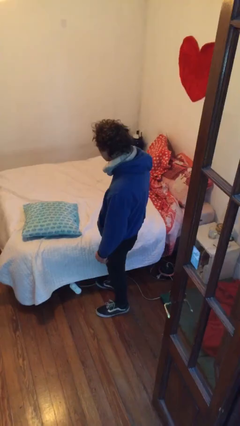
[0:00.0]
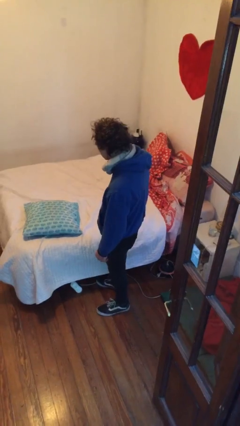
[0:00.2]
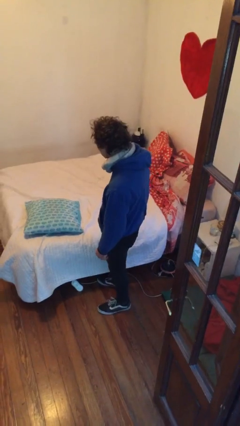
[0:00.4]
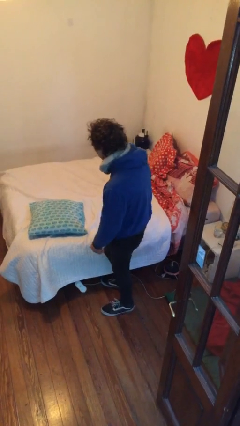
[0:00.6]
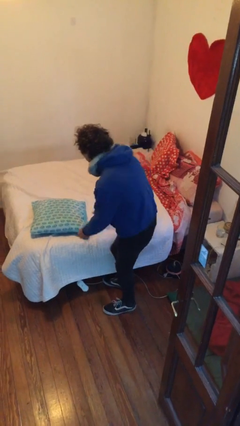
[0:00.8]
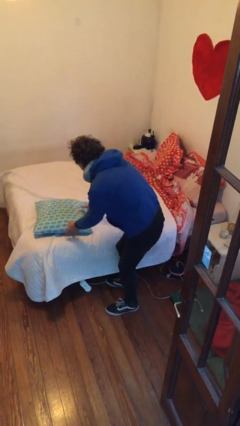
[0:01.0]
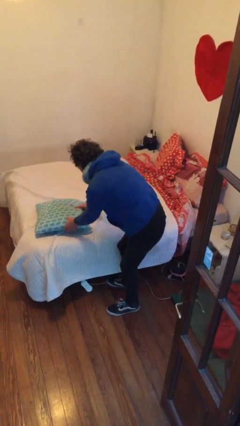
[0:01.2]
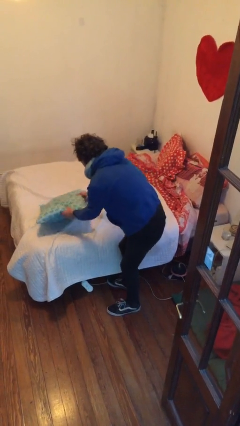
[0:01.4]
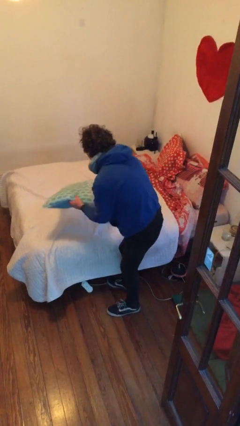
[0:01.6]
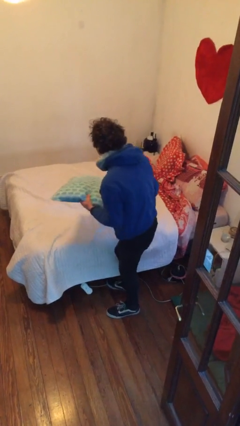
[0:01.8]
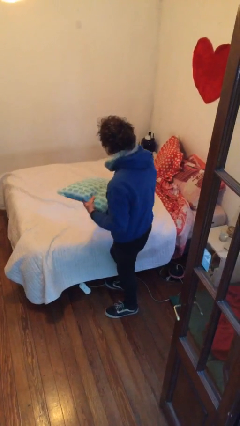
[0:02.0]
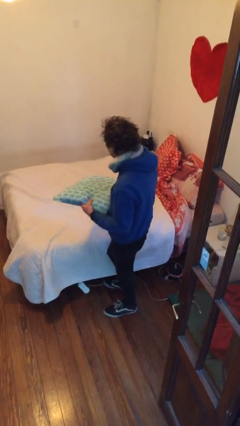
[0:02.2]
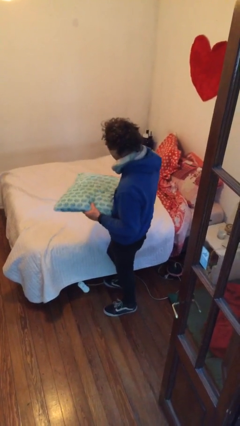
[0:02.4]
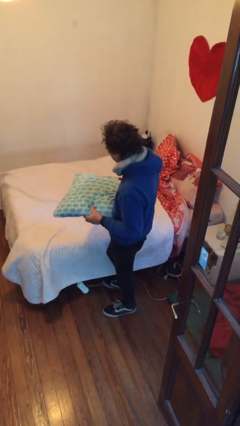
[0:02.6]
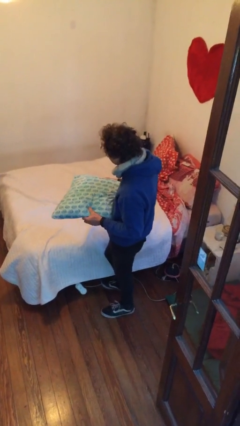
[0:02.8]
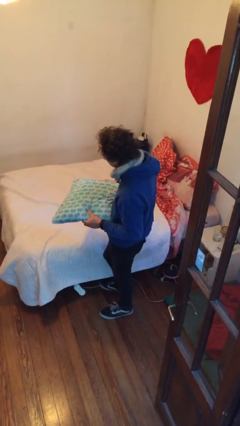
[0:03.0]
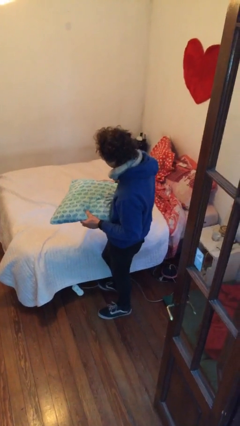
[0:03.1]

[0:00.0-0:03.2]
person picks up object from bed

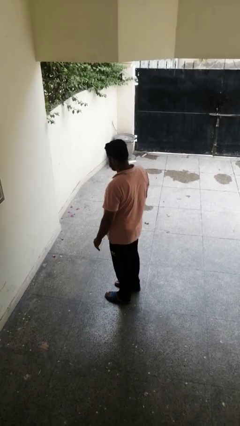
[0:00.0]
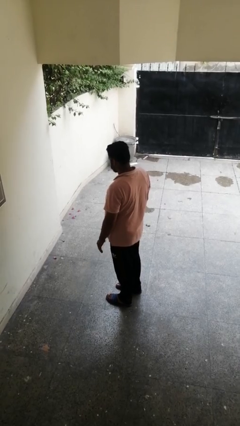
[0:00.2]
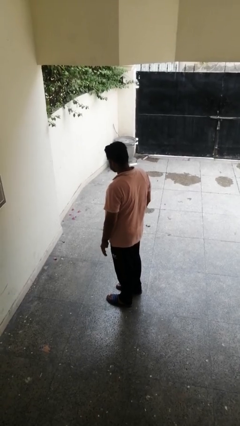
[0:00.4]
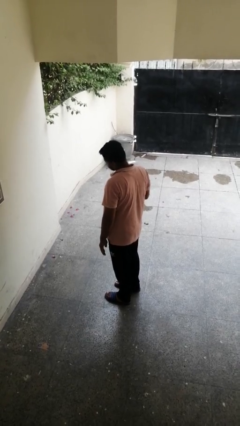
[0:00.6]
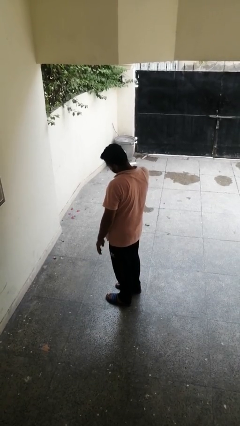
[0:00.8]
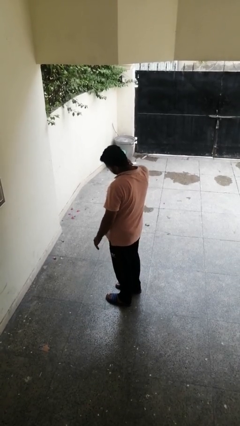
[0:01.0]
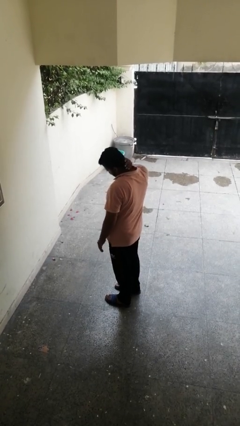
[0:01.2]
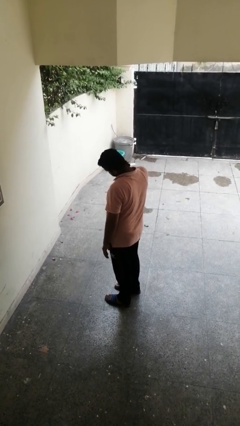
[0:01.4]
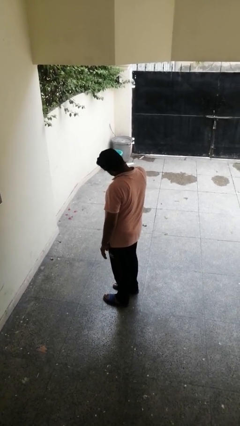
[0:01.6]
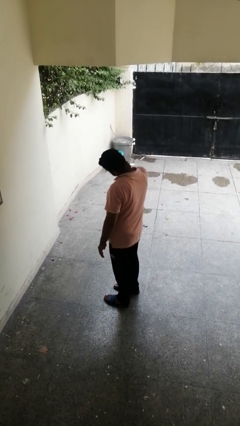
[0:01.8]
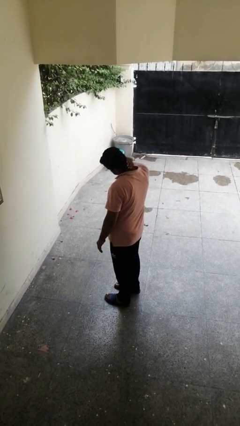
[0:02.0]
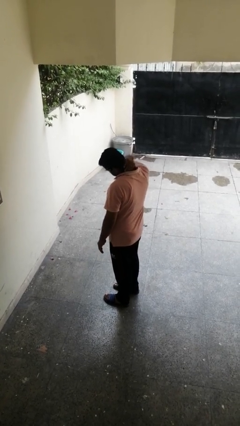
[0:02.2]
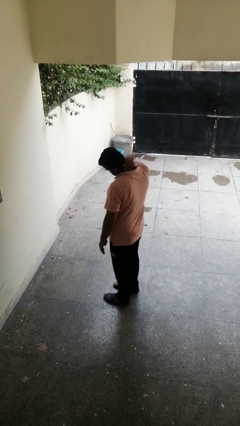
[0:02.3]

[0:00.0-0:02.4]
person rubs neck

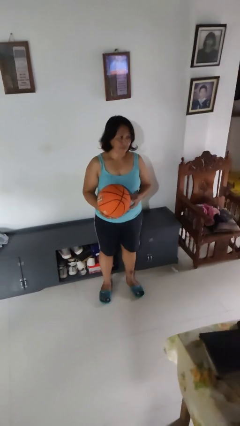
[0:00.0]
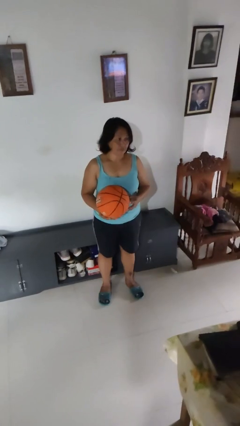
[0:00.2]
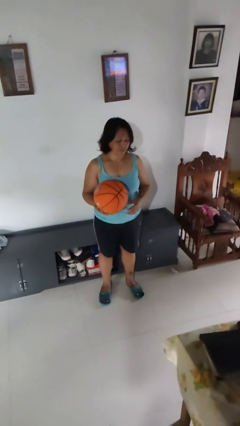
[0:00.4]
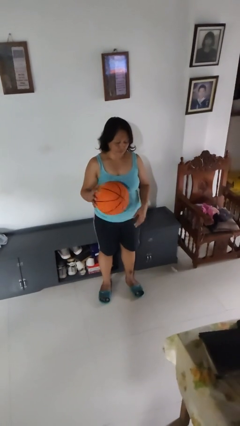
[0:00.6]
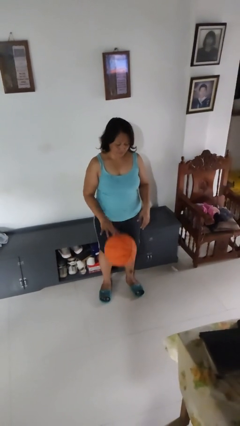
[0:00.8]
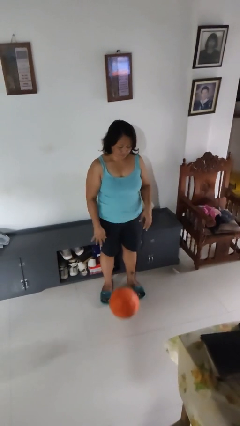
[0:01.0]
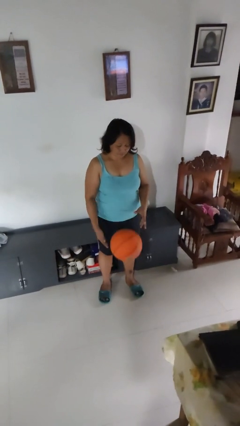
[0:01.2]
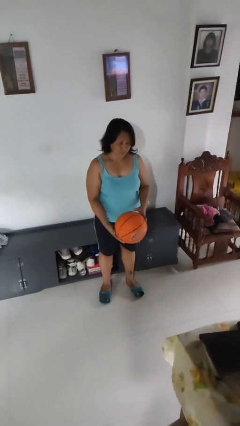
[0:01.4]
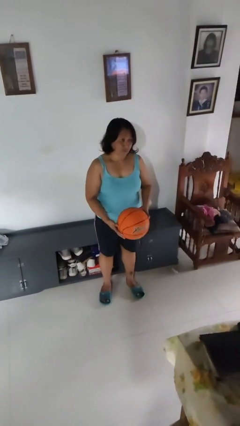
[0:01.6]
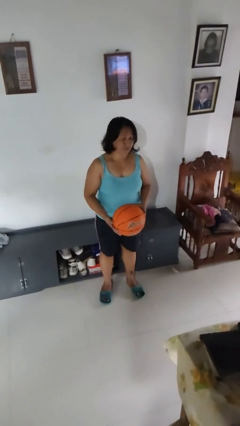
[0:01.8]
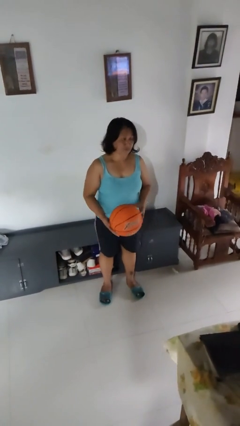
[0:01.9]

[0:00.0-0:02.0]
person bounces ball on floor

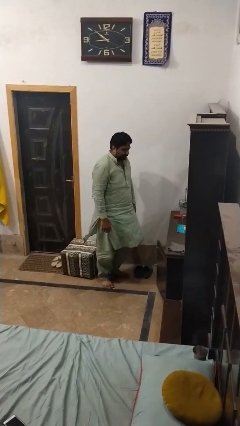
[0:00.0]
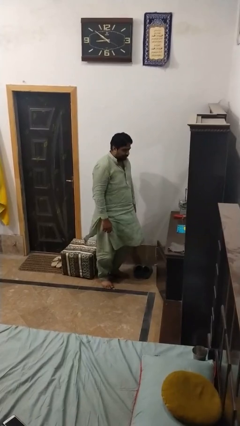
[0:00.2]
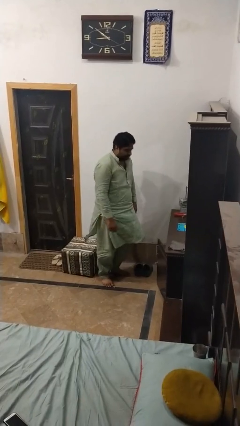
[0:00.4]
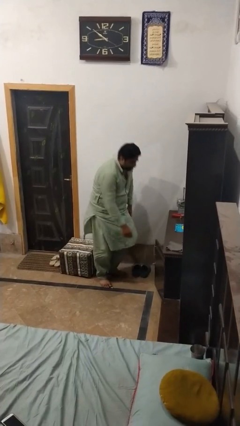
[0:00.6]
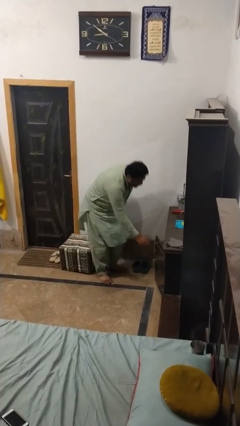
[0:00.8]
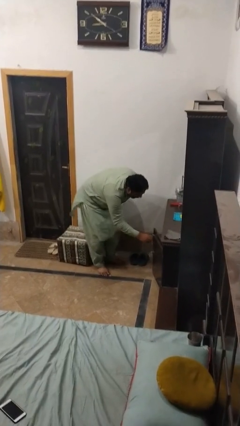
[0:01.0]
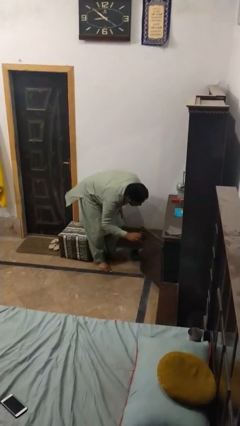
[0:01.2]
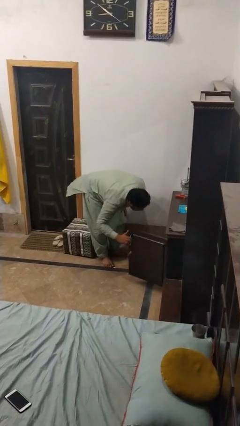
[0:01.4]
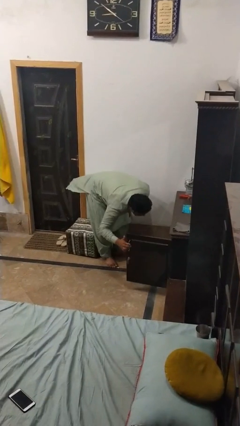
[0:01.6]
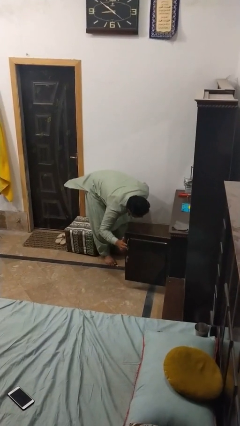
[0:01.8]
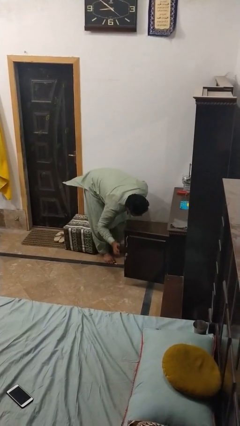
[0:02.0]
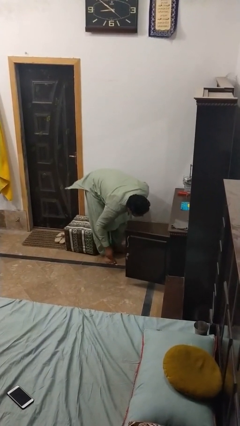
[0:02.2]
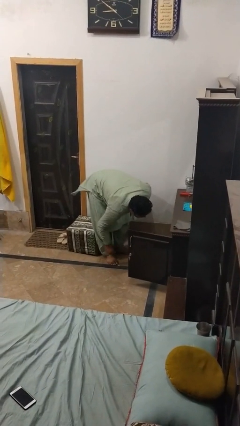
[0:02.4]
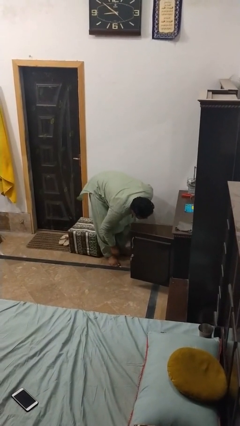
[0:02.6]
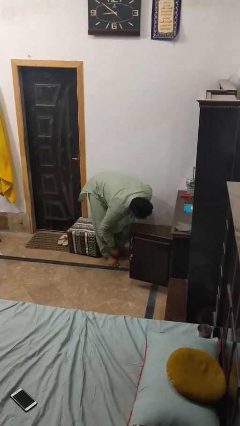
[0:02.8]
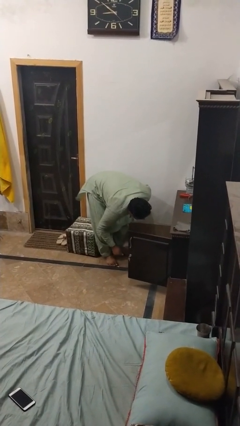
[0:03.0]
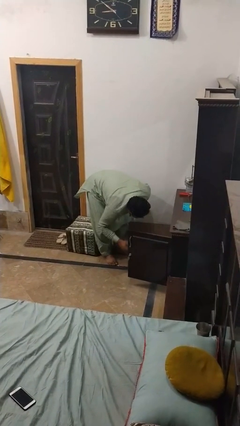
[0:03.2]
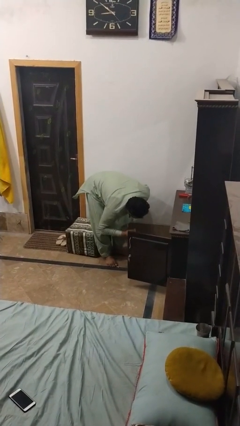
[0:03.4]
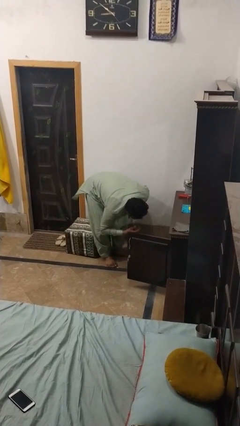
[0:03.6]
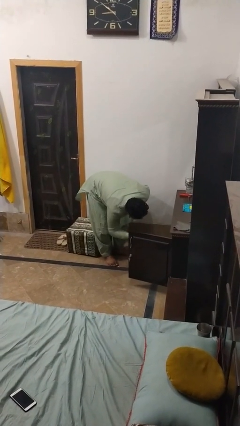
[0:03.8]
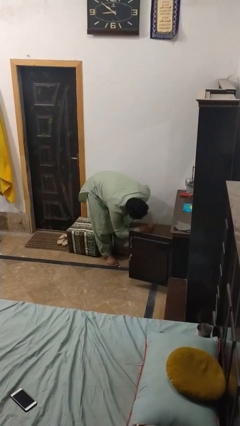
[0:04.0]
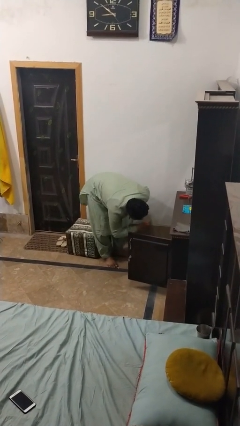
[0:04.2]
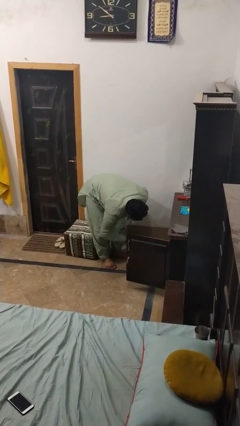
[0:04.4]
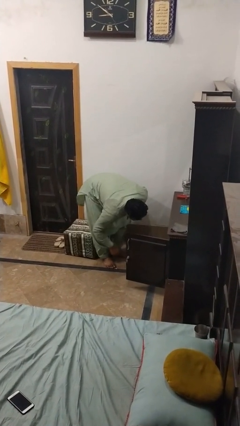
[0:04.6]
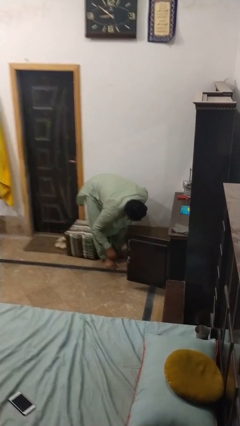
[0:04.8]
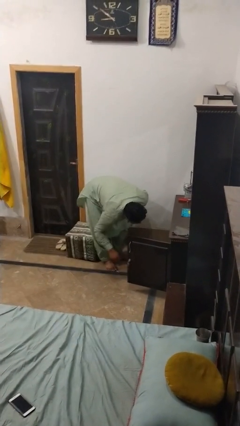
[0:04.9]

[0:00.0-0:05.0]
person searches in cabinet

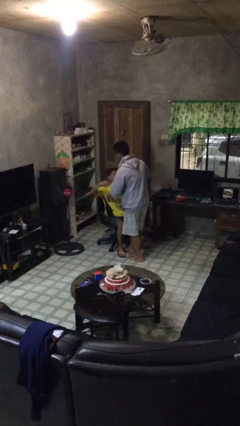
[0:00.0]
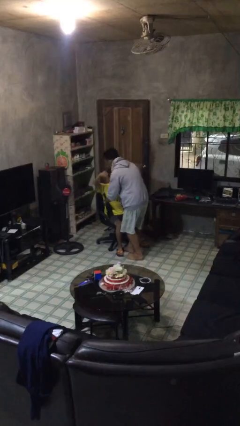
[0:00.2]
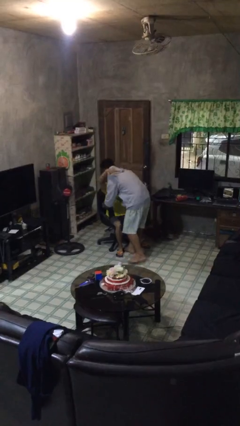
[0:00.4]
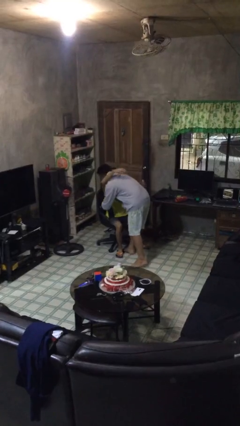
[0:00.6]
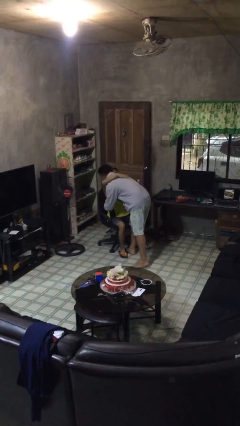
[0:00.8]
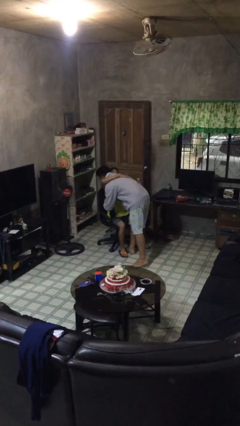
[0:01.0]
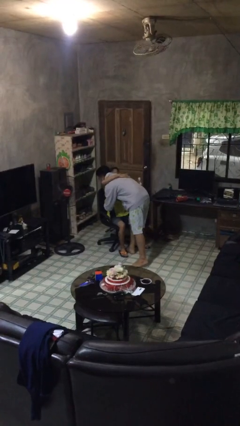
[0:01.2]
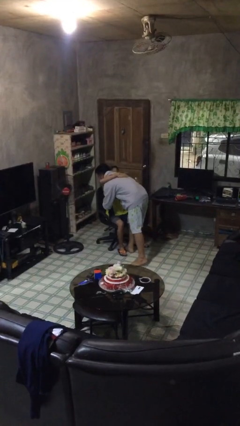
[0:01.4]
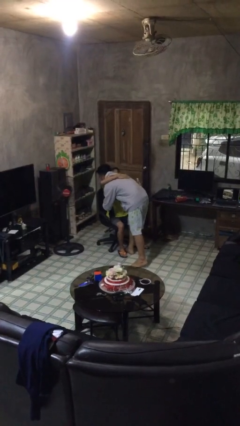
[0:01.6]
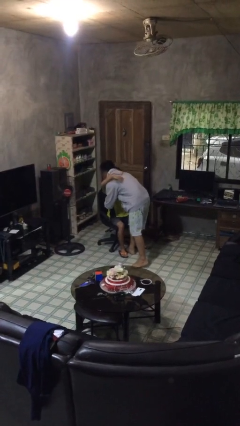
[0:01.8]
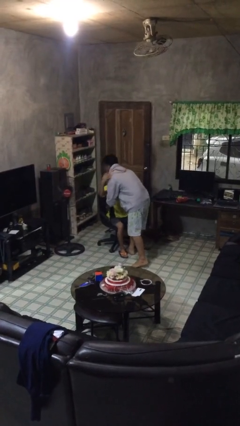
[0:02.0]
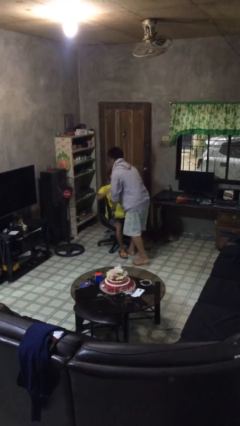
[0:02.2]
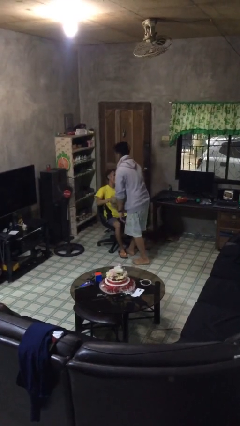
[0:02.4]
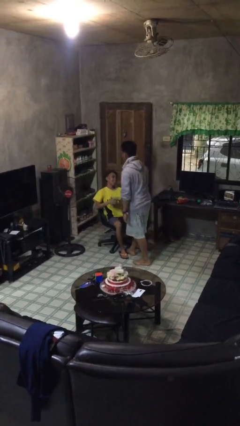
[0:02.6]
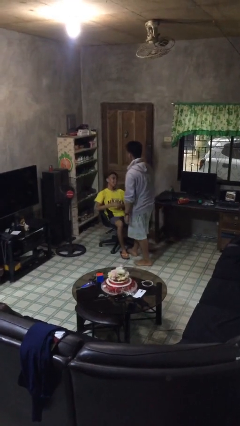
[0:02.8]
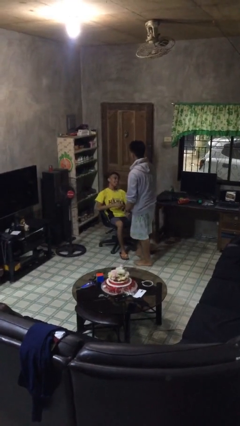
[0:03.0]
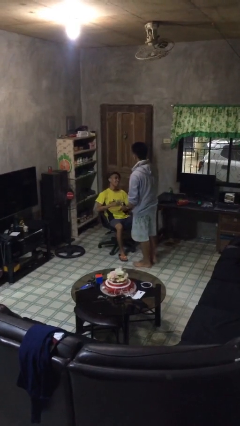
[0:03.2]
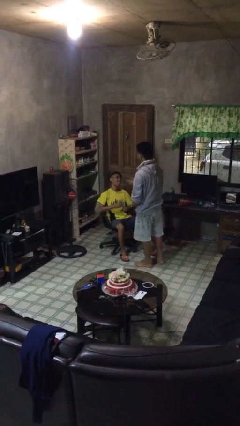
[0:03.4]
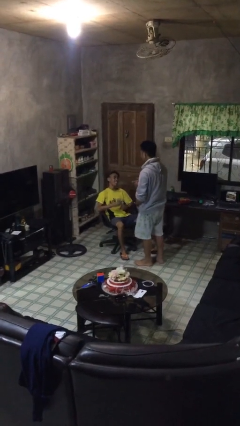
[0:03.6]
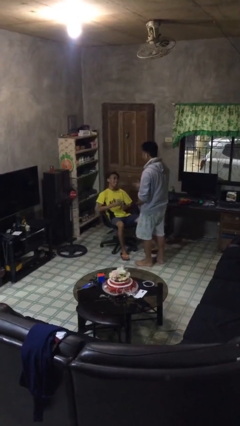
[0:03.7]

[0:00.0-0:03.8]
person embraces person

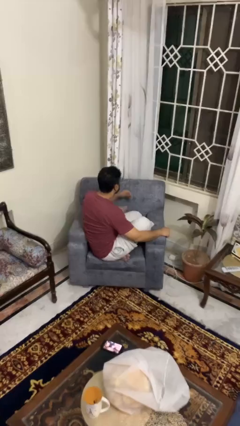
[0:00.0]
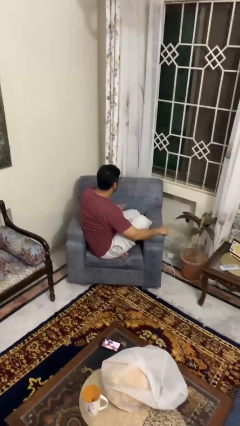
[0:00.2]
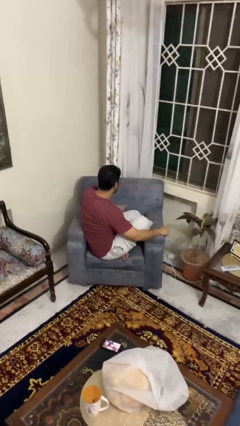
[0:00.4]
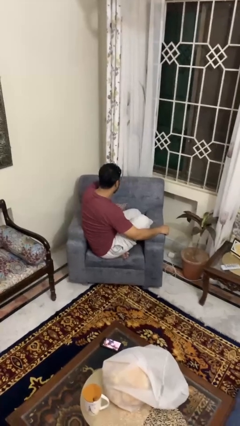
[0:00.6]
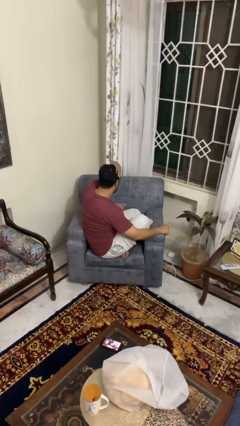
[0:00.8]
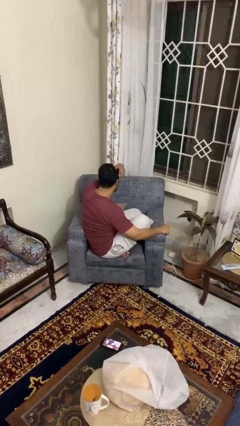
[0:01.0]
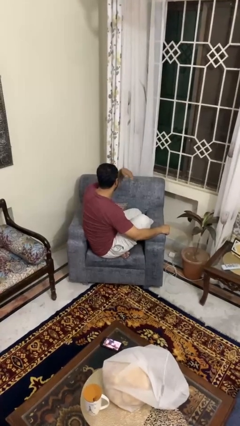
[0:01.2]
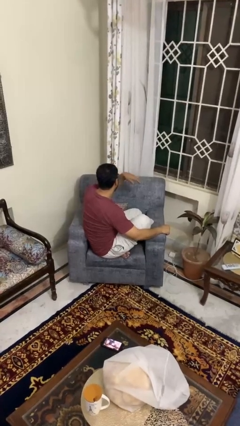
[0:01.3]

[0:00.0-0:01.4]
person strokes hair
